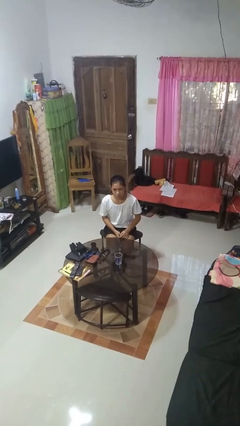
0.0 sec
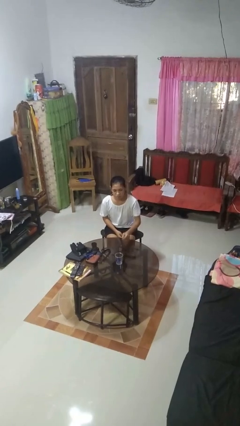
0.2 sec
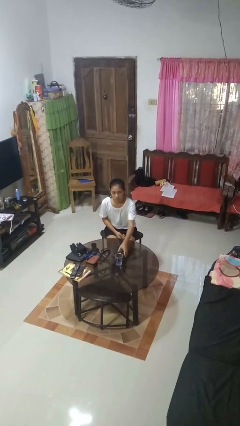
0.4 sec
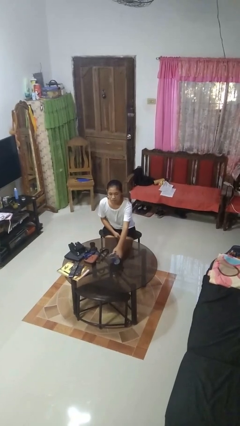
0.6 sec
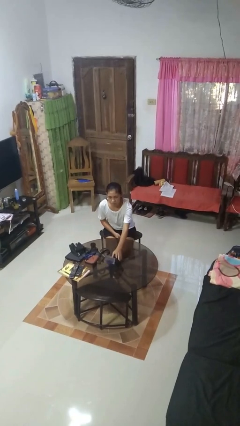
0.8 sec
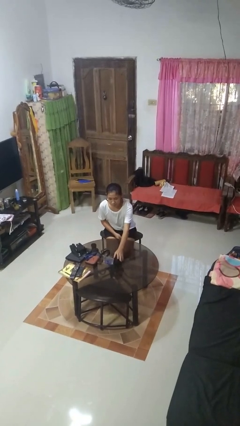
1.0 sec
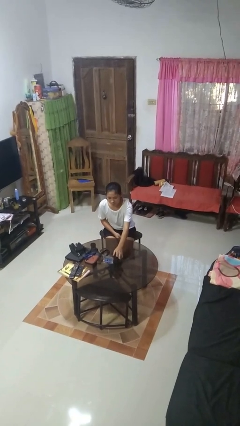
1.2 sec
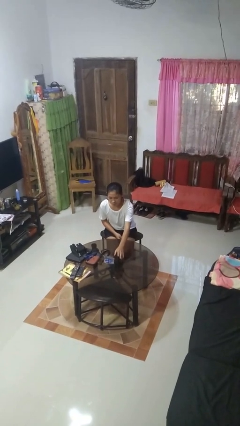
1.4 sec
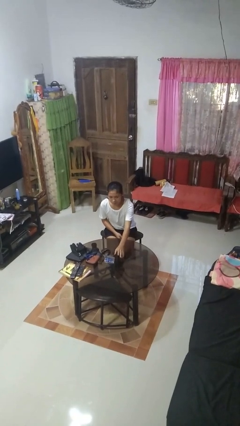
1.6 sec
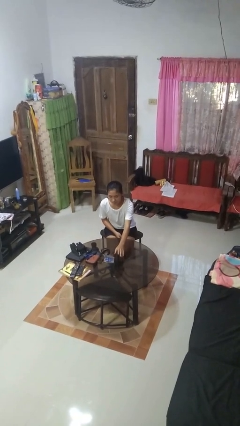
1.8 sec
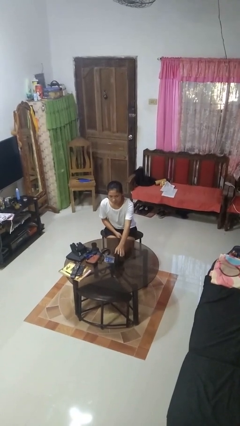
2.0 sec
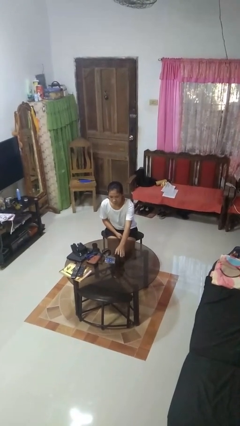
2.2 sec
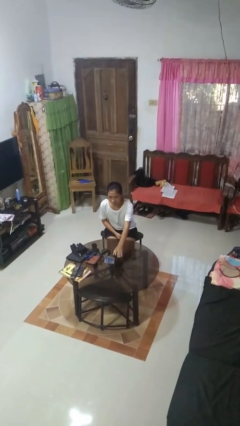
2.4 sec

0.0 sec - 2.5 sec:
person knocks over glass

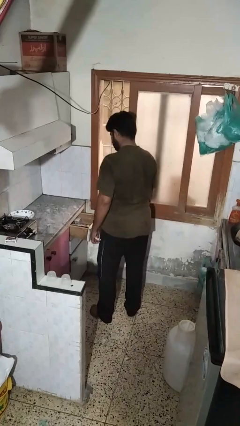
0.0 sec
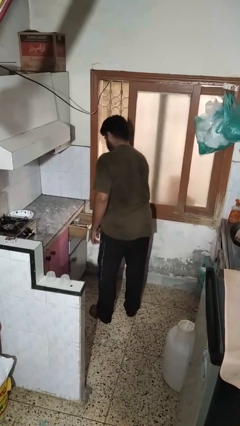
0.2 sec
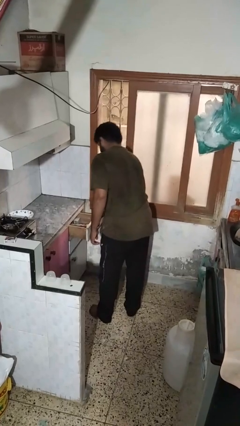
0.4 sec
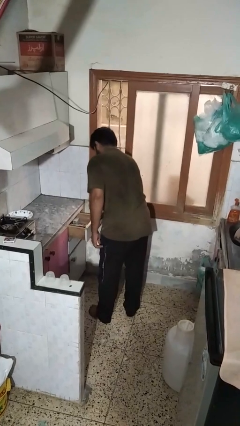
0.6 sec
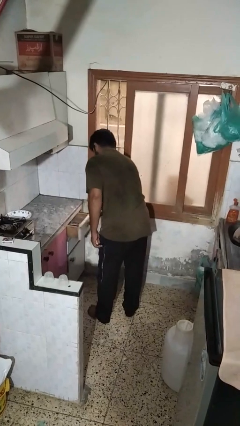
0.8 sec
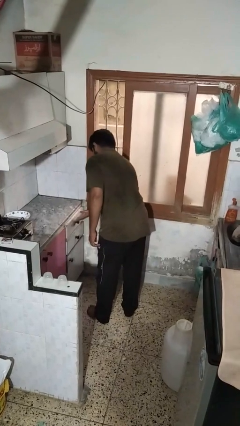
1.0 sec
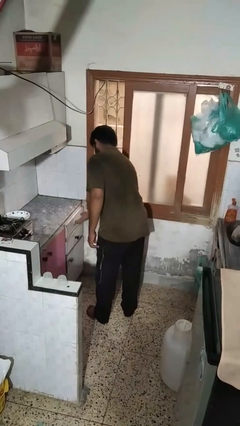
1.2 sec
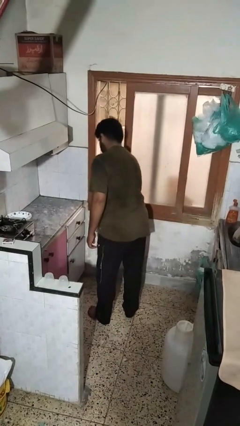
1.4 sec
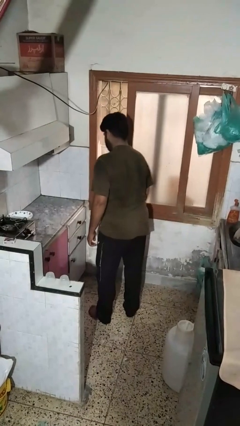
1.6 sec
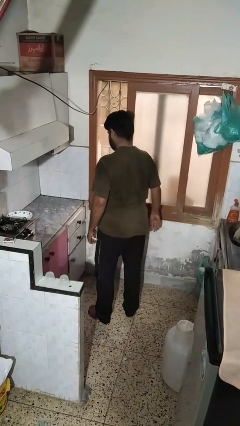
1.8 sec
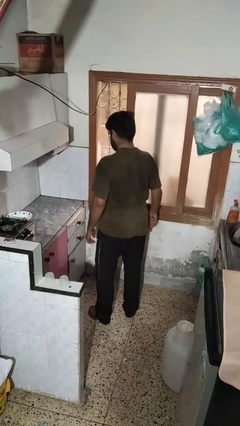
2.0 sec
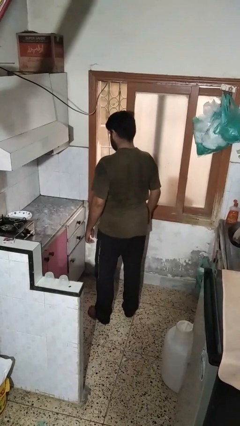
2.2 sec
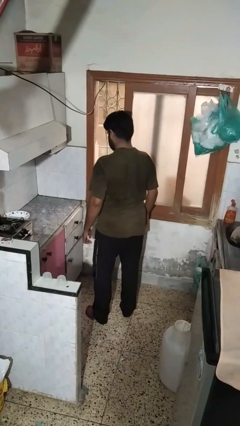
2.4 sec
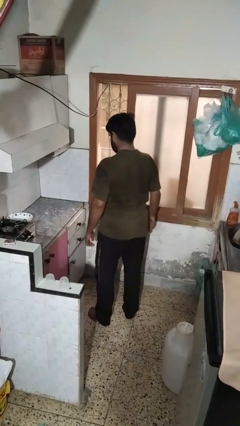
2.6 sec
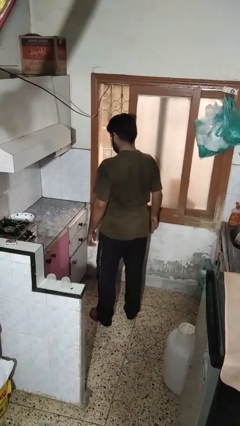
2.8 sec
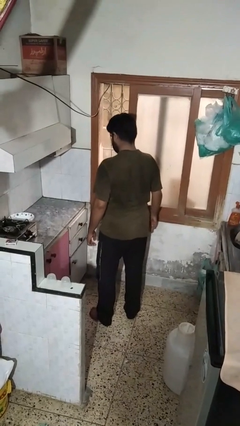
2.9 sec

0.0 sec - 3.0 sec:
person closes kitchen drawer

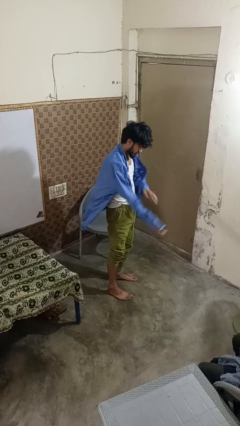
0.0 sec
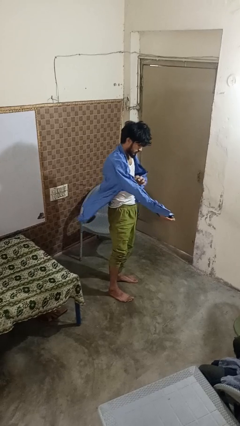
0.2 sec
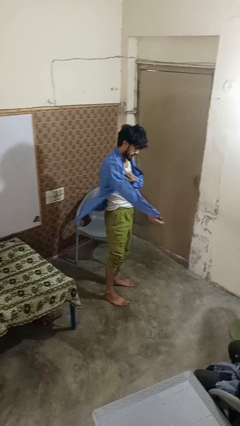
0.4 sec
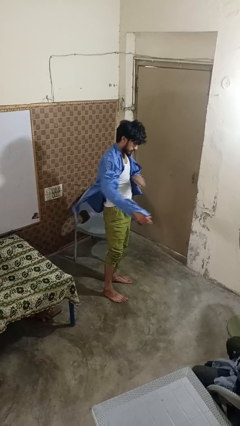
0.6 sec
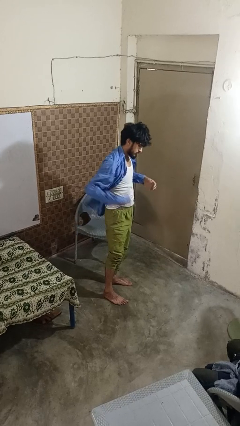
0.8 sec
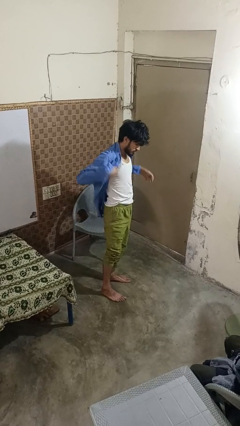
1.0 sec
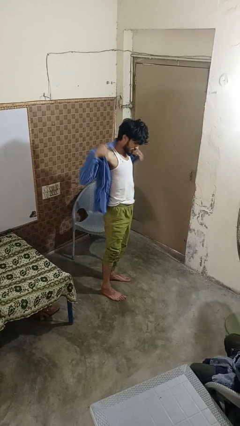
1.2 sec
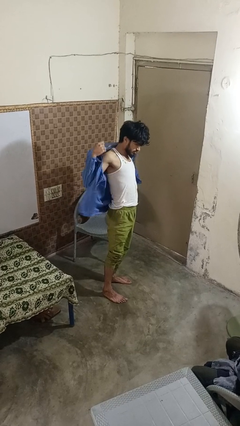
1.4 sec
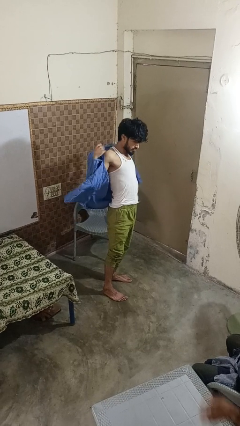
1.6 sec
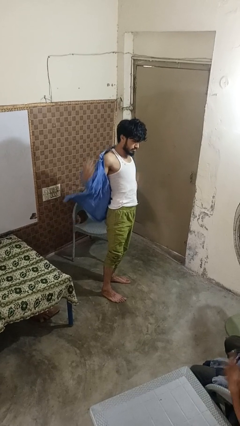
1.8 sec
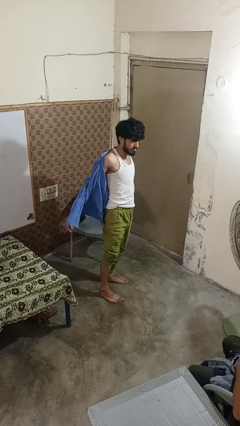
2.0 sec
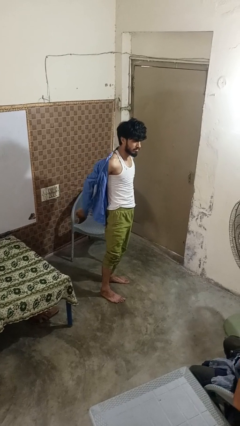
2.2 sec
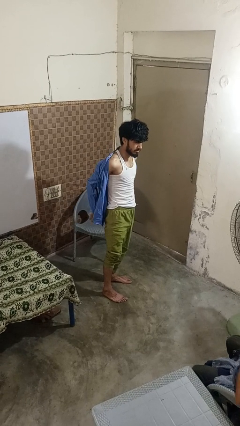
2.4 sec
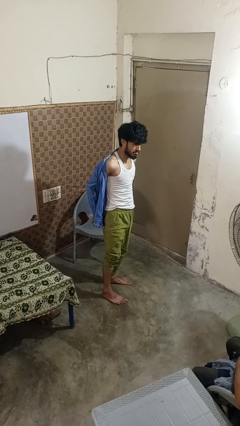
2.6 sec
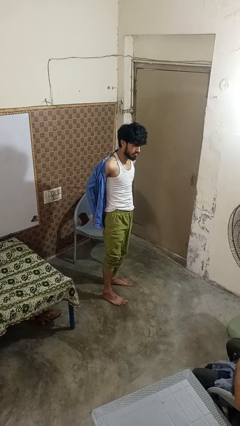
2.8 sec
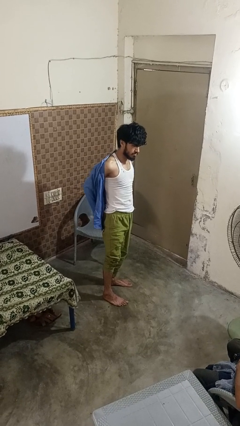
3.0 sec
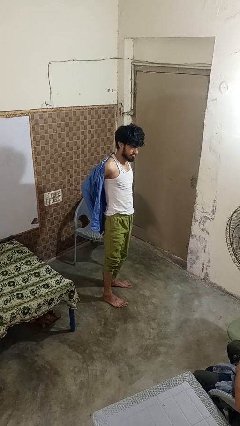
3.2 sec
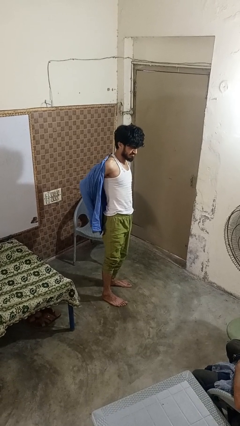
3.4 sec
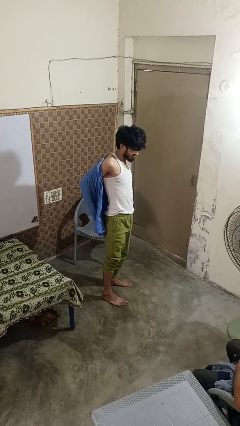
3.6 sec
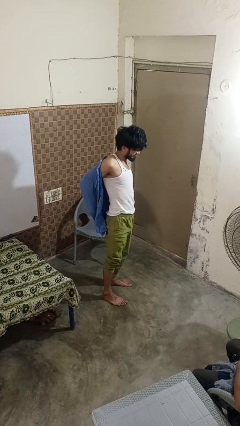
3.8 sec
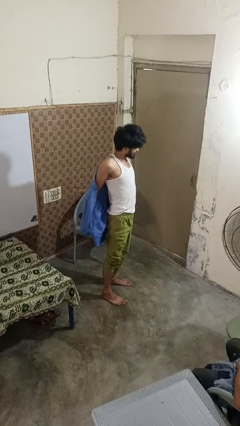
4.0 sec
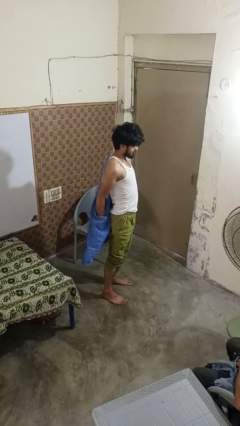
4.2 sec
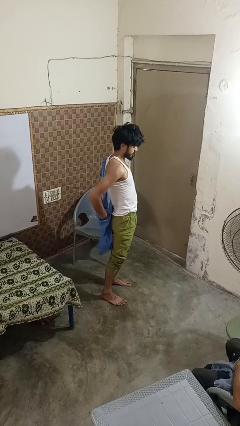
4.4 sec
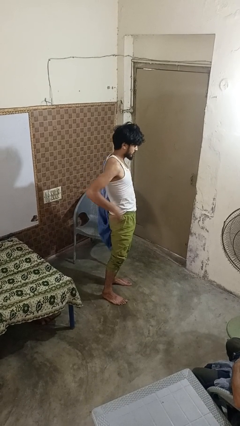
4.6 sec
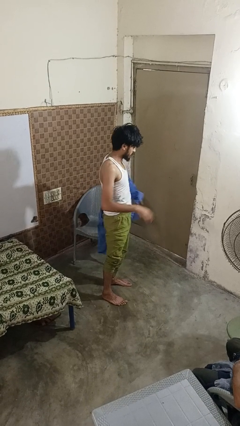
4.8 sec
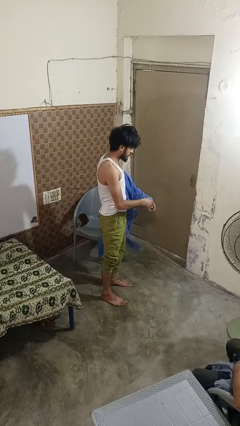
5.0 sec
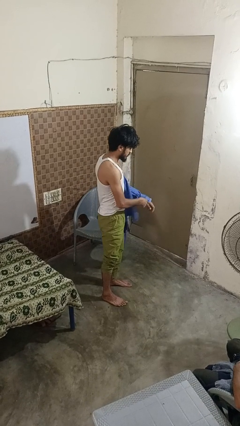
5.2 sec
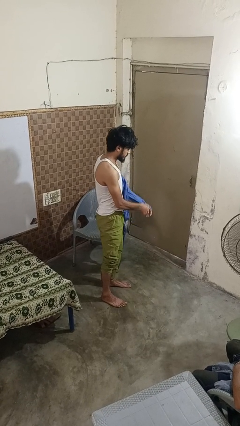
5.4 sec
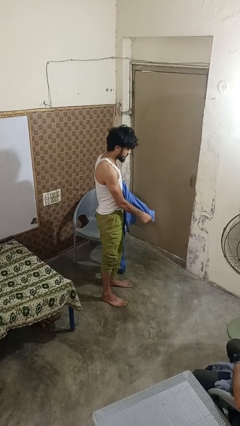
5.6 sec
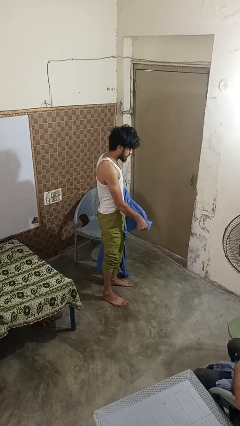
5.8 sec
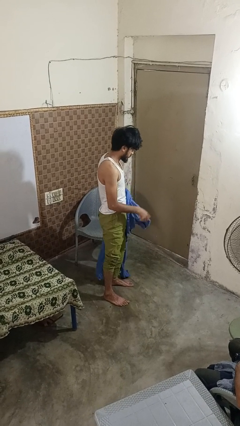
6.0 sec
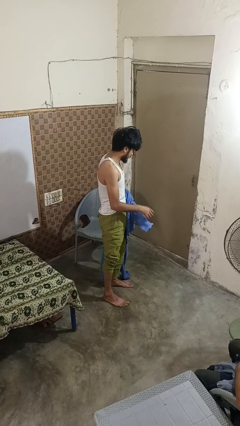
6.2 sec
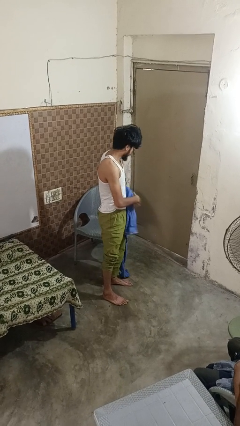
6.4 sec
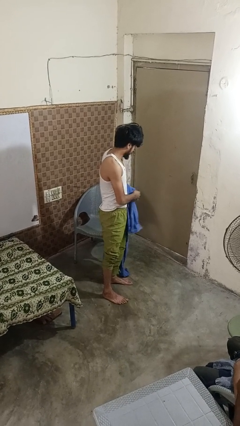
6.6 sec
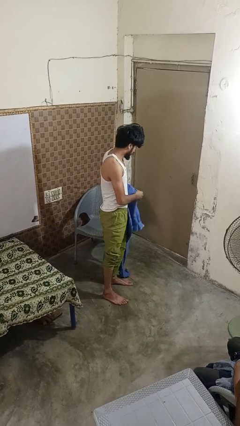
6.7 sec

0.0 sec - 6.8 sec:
person takes off shirt

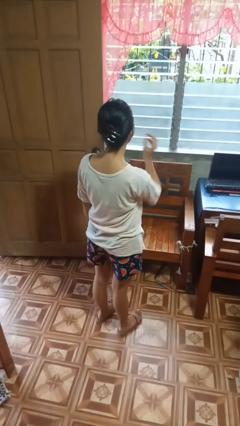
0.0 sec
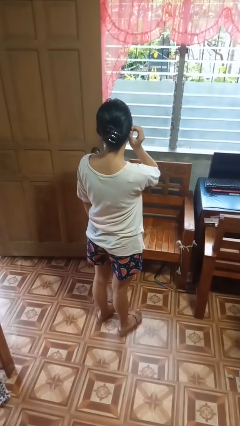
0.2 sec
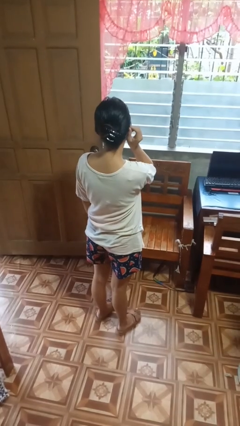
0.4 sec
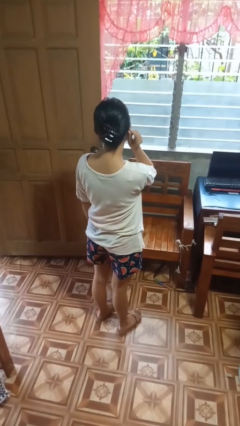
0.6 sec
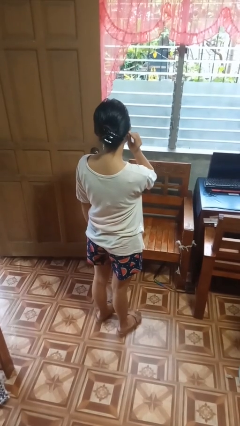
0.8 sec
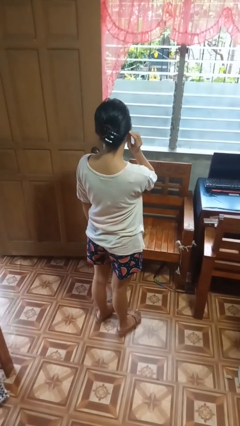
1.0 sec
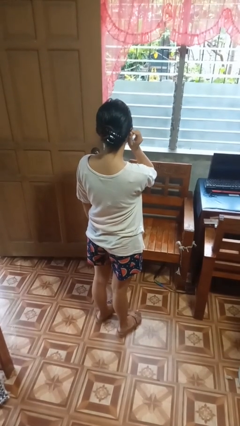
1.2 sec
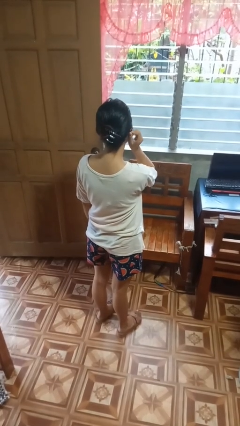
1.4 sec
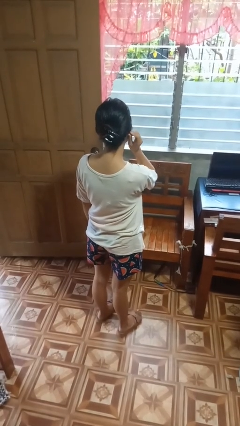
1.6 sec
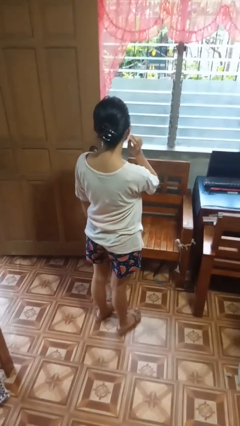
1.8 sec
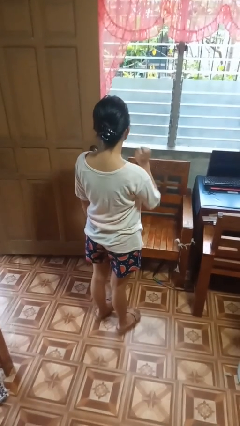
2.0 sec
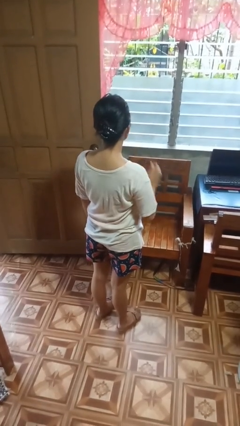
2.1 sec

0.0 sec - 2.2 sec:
person touches earlobe

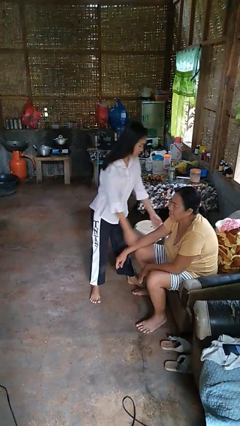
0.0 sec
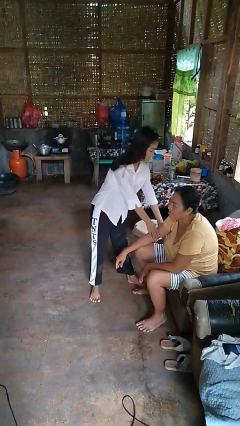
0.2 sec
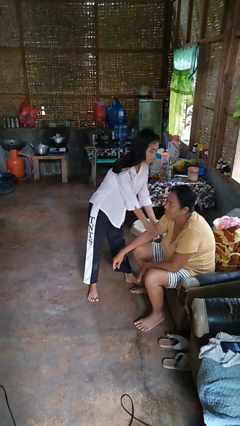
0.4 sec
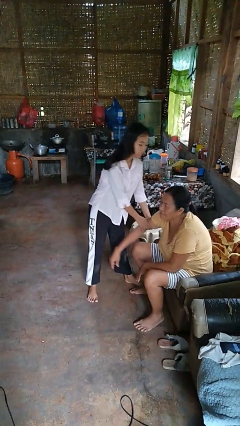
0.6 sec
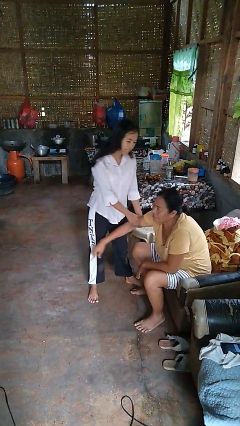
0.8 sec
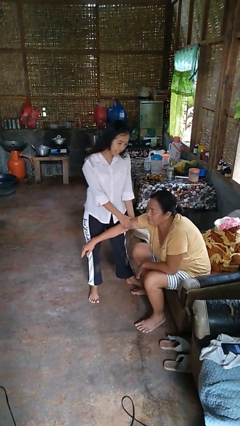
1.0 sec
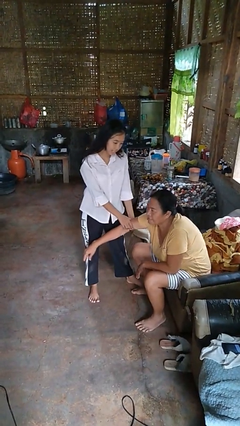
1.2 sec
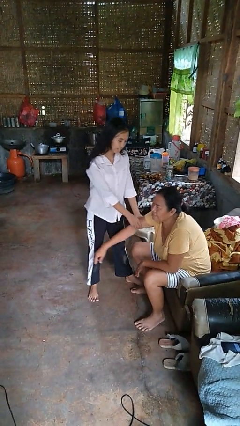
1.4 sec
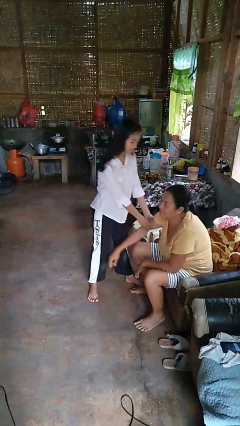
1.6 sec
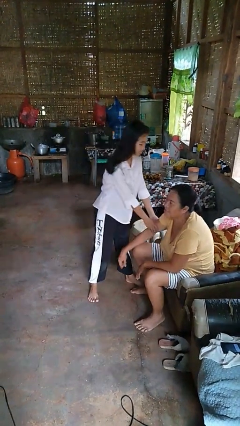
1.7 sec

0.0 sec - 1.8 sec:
person grabs person by bicep

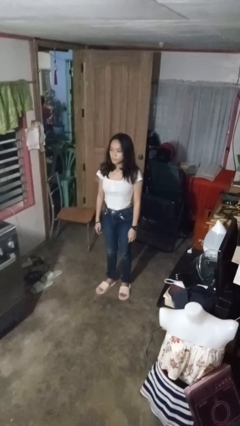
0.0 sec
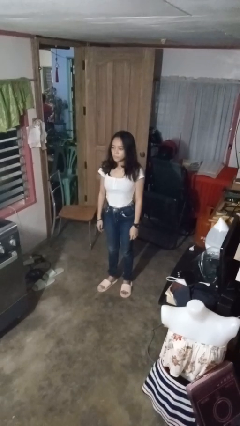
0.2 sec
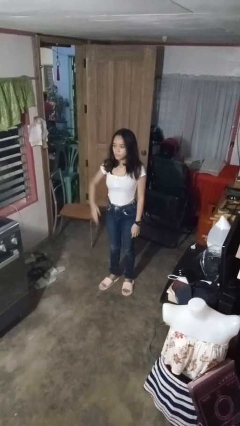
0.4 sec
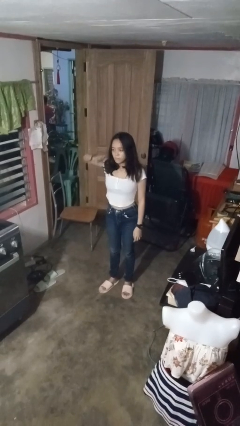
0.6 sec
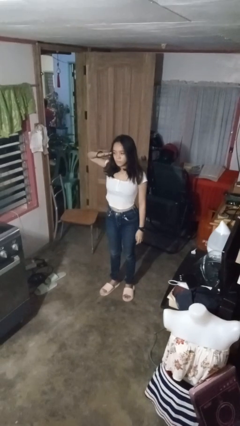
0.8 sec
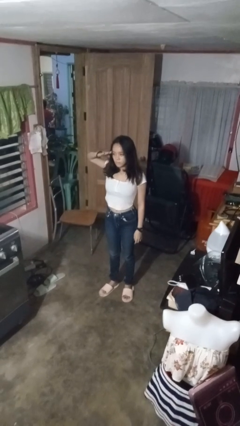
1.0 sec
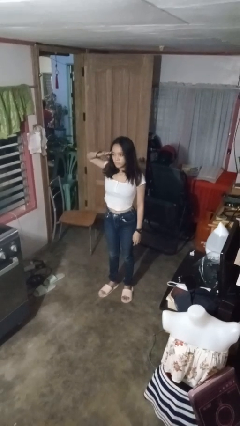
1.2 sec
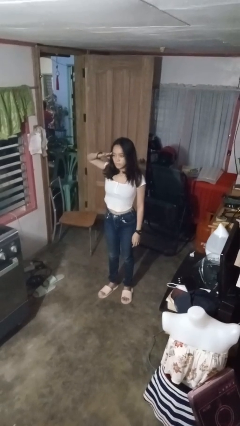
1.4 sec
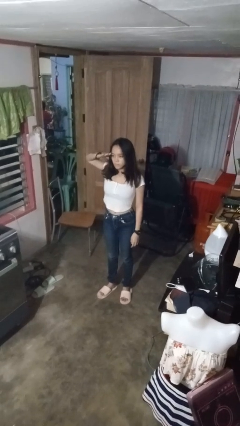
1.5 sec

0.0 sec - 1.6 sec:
person salutes
